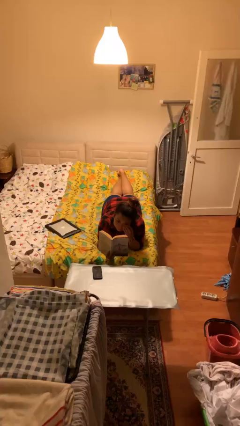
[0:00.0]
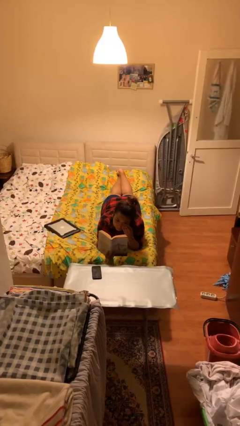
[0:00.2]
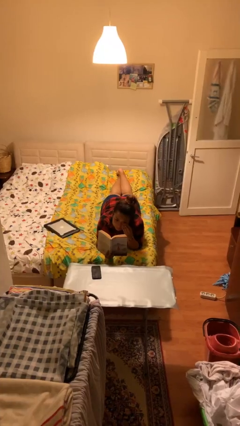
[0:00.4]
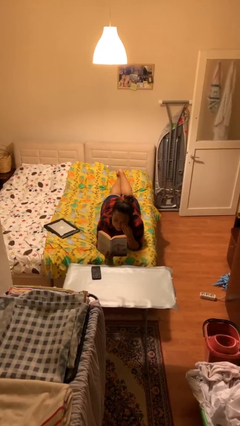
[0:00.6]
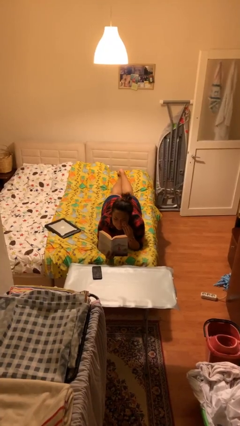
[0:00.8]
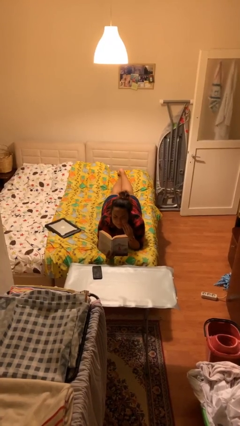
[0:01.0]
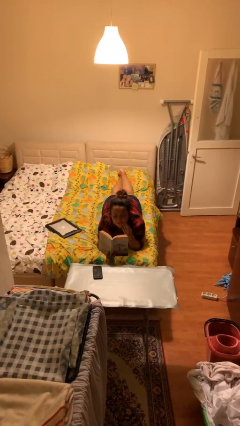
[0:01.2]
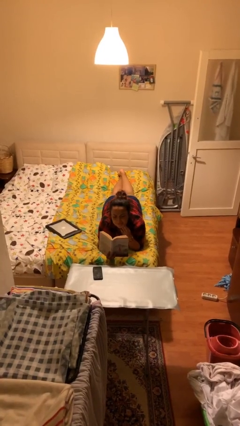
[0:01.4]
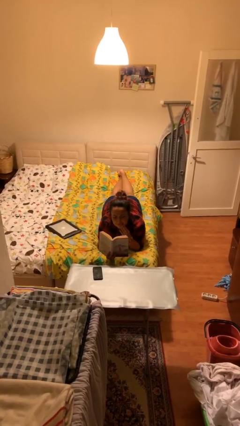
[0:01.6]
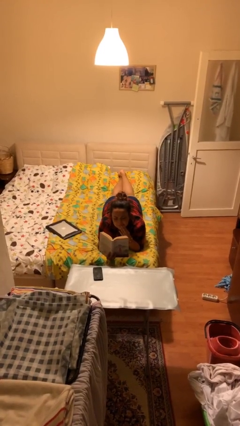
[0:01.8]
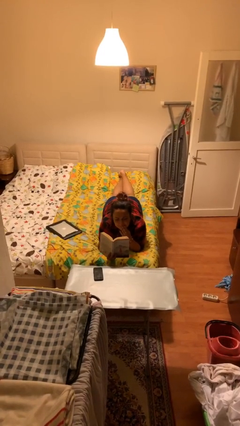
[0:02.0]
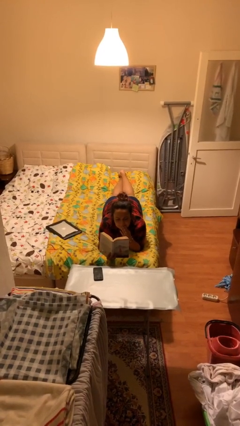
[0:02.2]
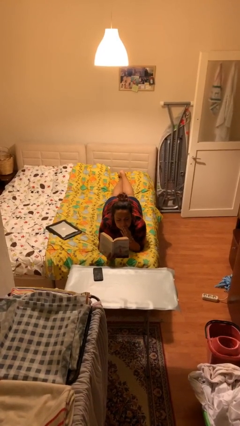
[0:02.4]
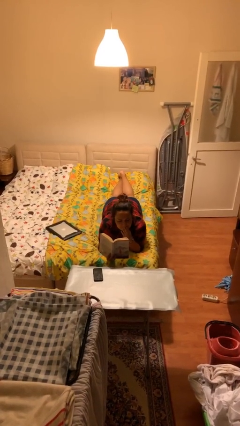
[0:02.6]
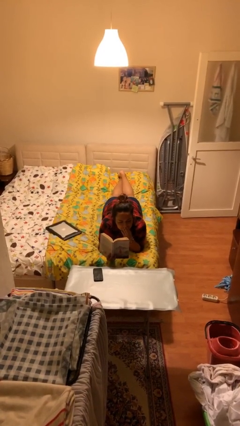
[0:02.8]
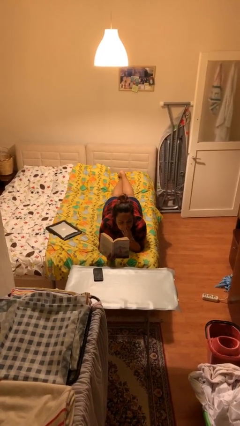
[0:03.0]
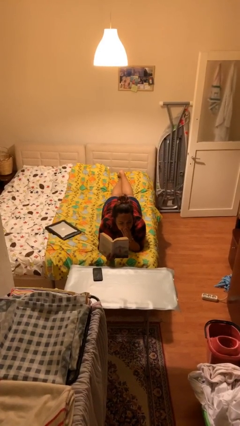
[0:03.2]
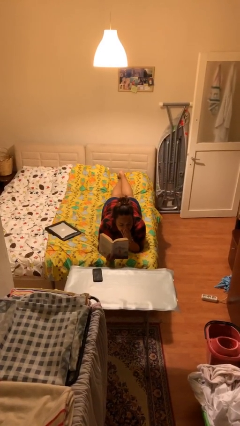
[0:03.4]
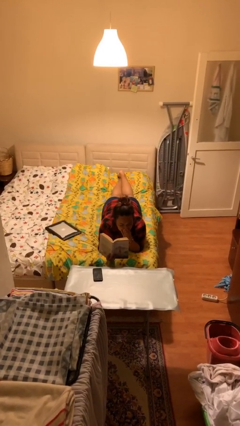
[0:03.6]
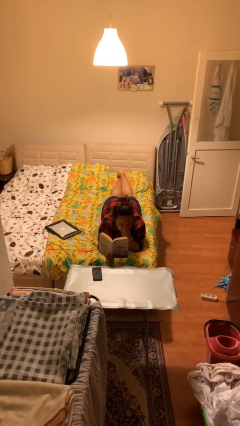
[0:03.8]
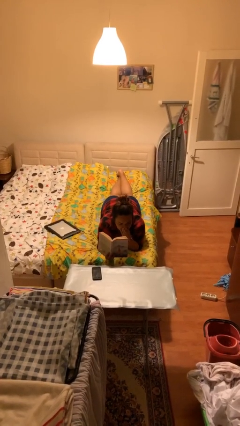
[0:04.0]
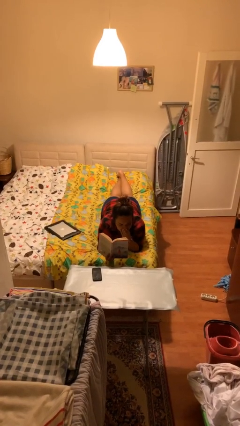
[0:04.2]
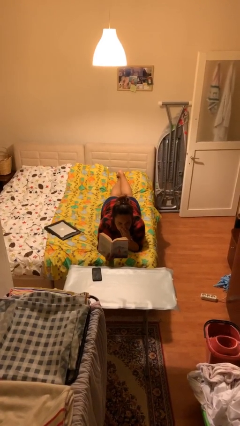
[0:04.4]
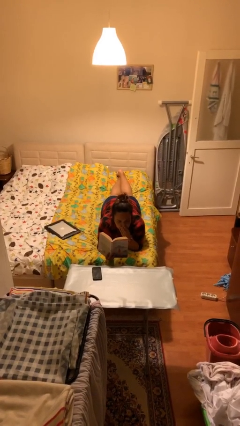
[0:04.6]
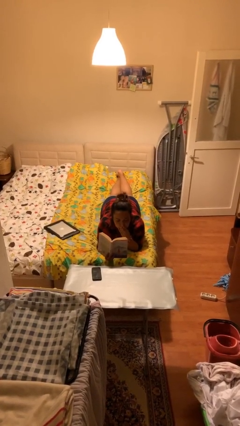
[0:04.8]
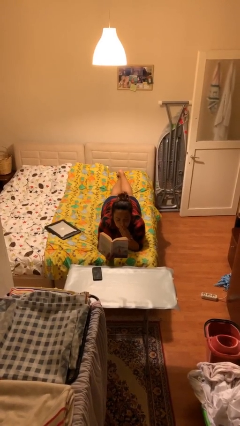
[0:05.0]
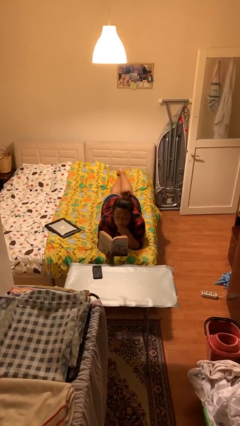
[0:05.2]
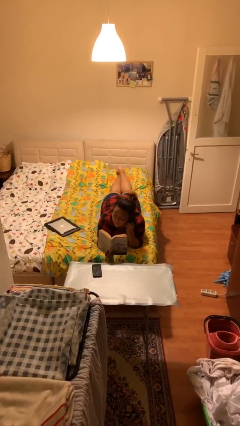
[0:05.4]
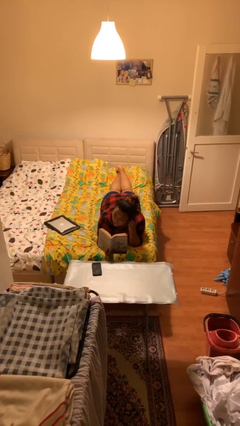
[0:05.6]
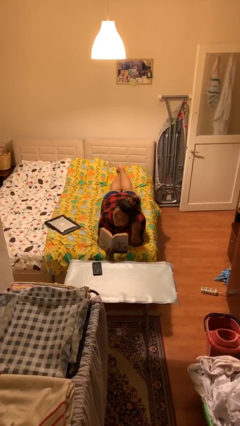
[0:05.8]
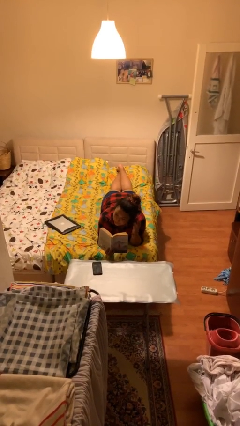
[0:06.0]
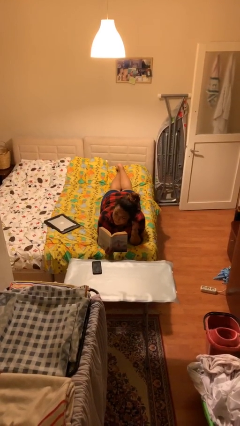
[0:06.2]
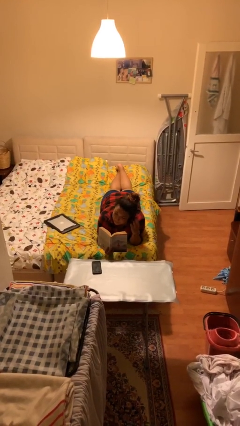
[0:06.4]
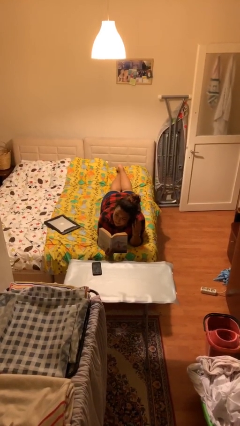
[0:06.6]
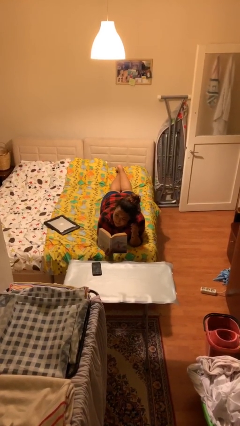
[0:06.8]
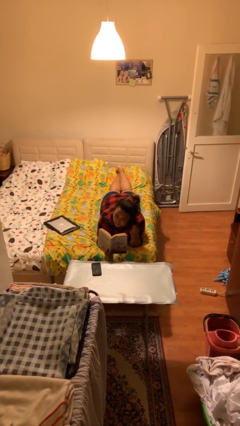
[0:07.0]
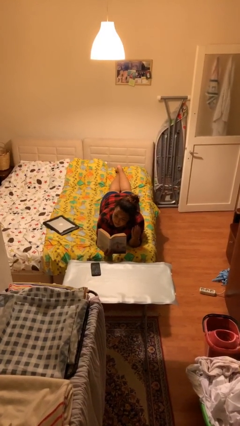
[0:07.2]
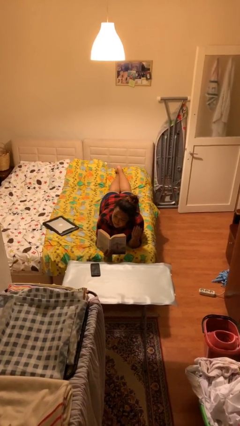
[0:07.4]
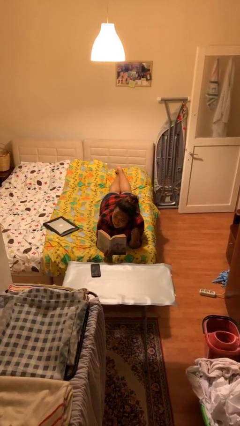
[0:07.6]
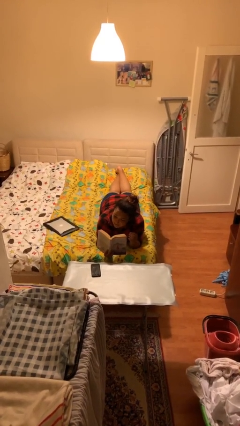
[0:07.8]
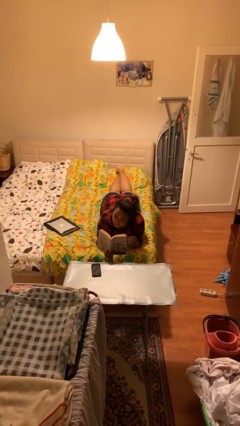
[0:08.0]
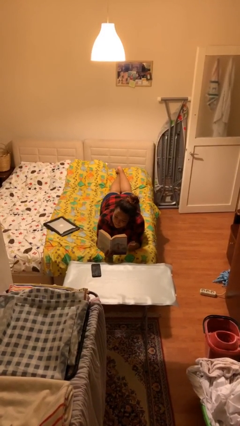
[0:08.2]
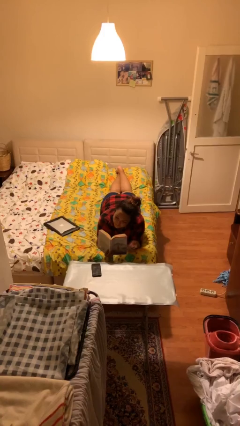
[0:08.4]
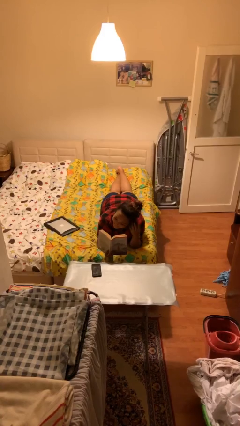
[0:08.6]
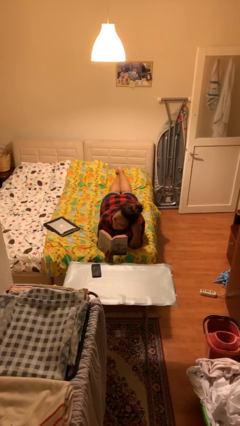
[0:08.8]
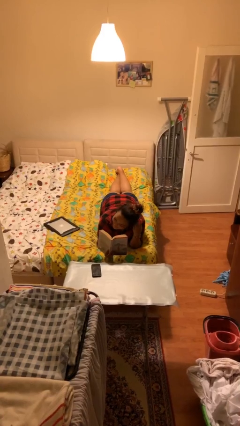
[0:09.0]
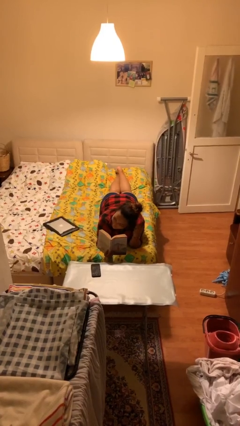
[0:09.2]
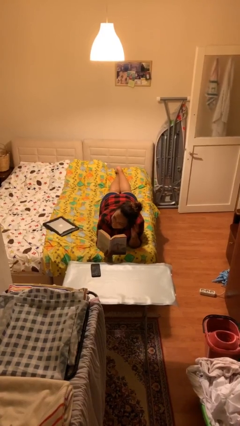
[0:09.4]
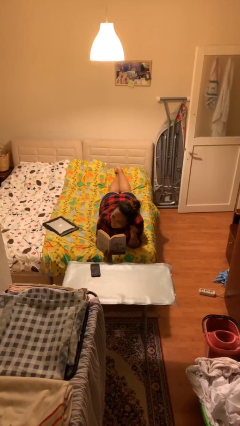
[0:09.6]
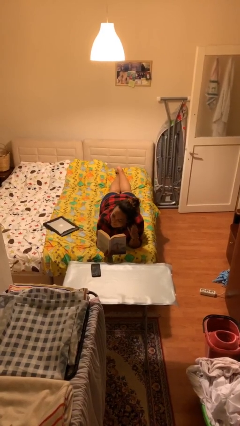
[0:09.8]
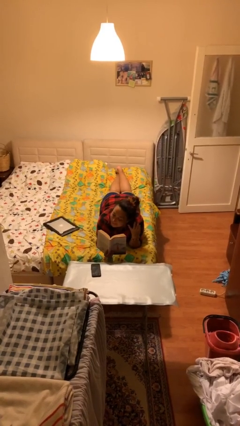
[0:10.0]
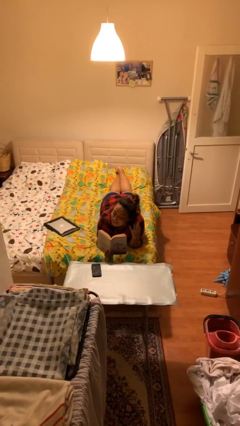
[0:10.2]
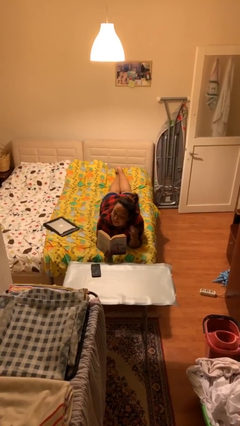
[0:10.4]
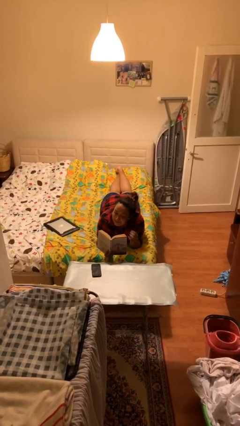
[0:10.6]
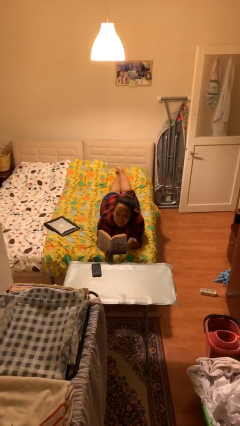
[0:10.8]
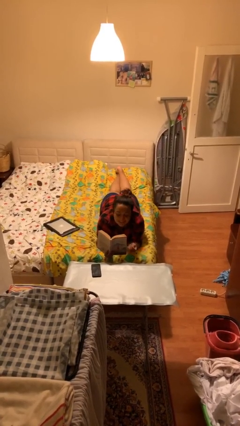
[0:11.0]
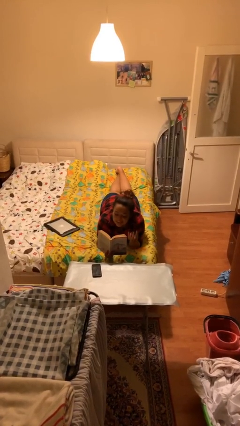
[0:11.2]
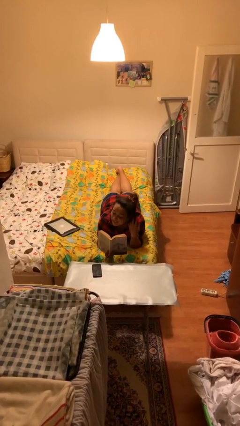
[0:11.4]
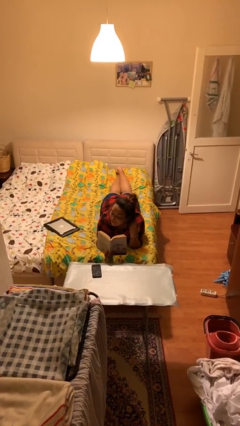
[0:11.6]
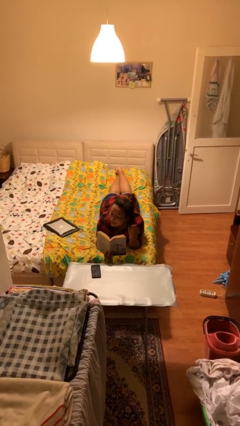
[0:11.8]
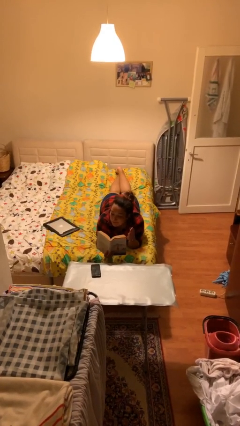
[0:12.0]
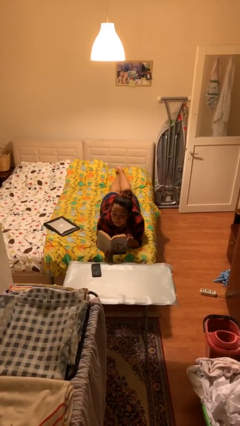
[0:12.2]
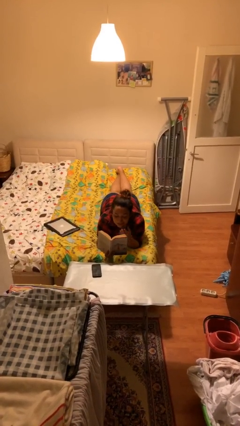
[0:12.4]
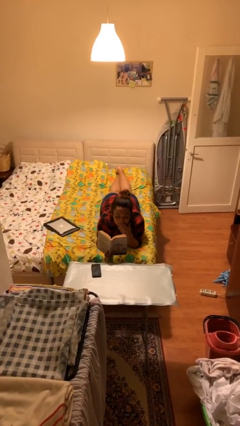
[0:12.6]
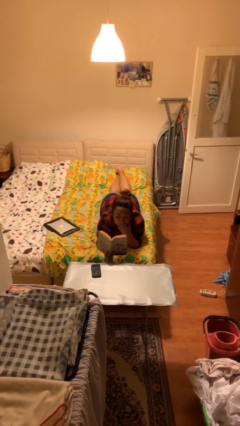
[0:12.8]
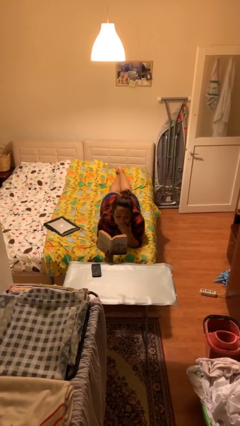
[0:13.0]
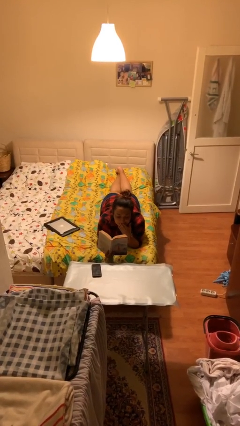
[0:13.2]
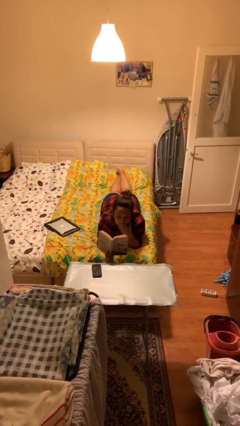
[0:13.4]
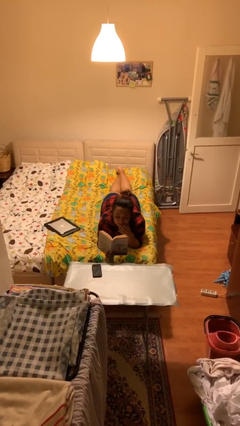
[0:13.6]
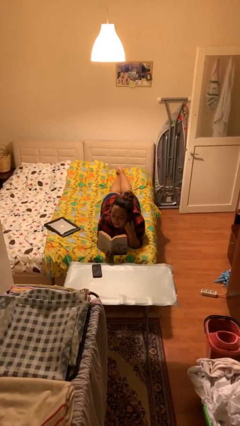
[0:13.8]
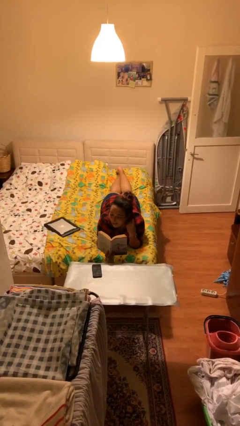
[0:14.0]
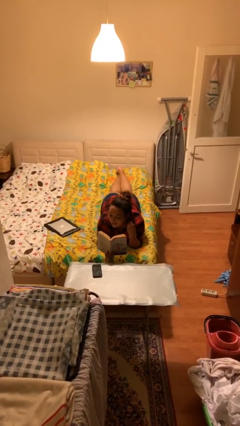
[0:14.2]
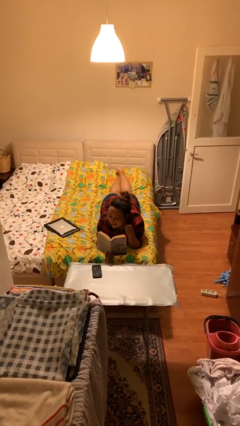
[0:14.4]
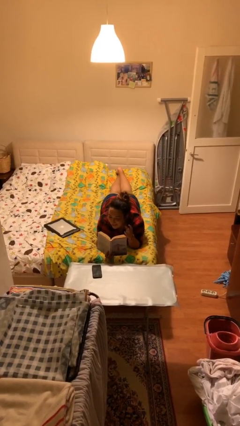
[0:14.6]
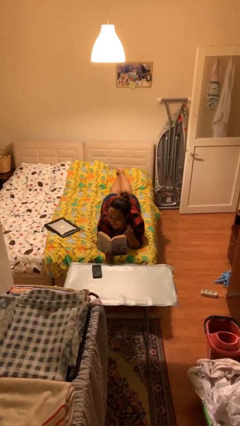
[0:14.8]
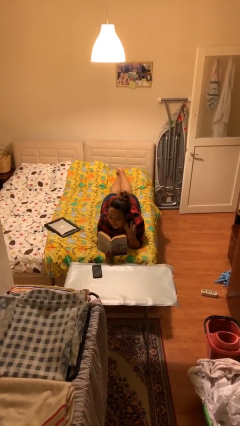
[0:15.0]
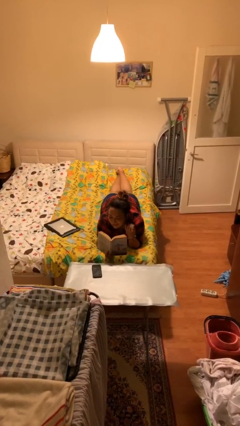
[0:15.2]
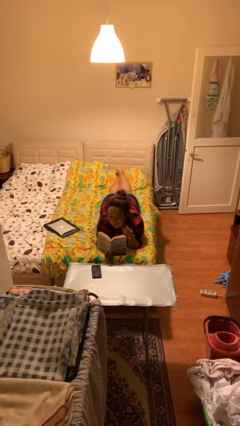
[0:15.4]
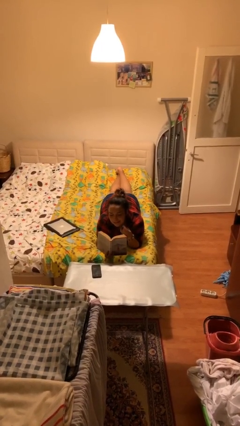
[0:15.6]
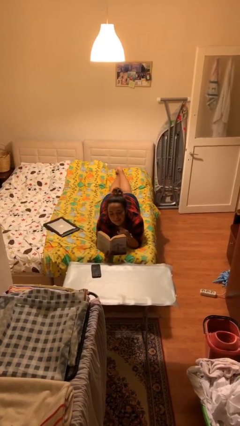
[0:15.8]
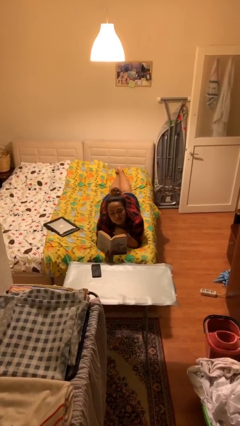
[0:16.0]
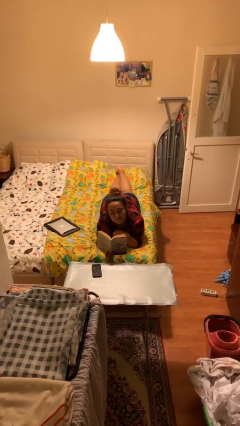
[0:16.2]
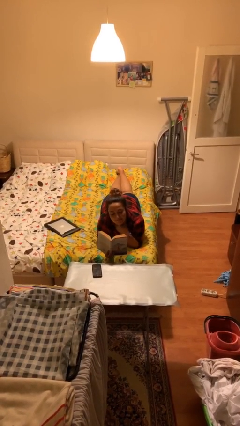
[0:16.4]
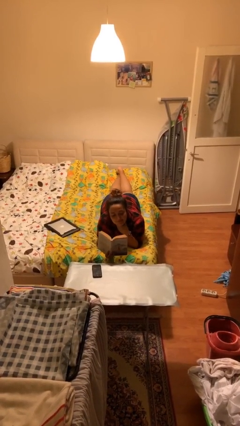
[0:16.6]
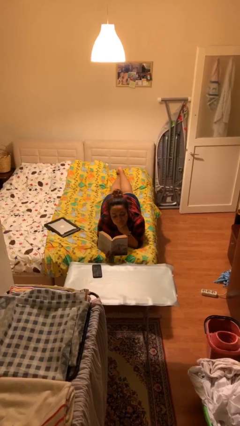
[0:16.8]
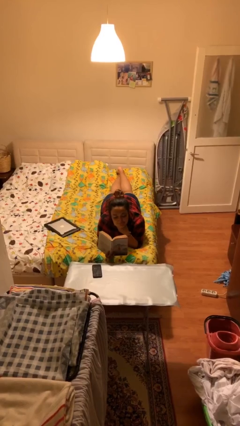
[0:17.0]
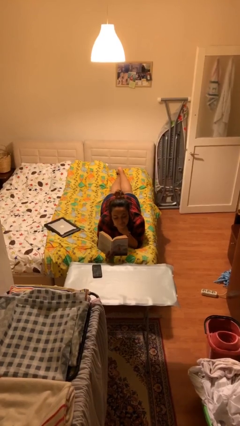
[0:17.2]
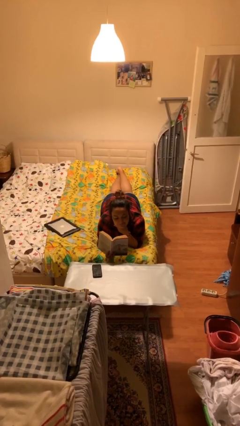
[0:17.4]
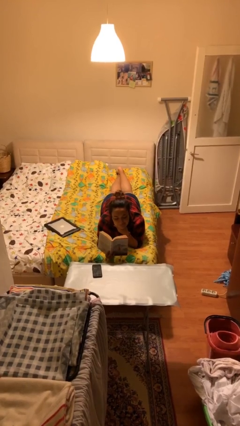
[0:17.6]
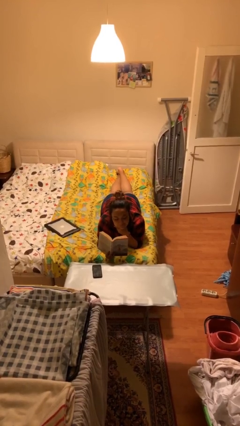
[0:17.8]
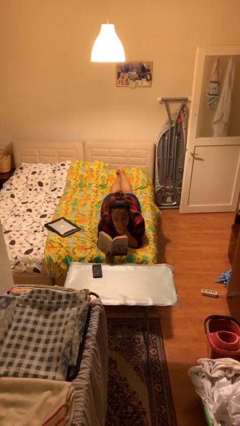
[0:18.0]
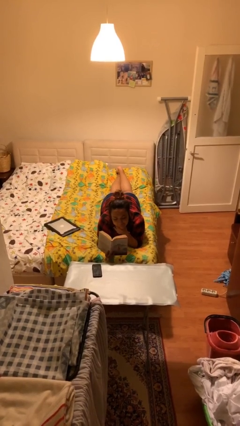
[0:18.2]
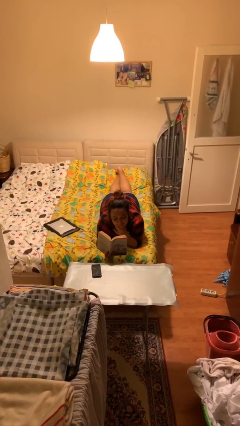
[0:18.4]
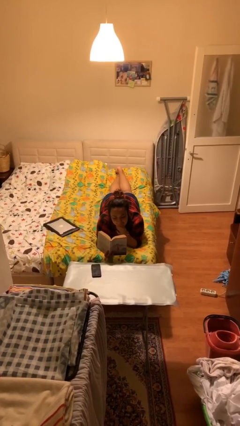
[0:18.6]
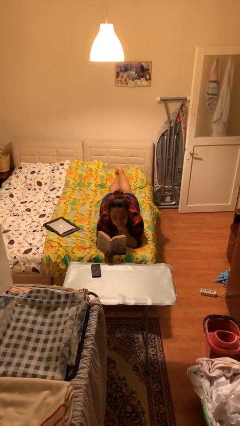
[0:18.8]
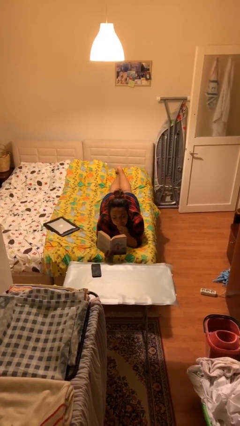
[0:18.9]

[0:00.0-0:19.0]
person reads document
